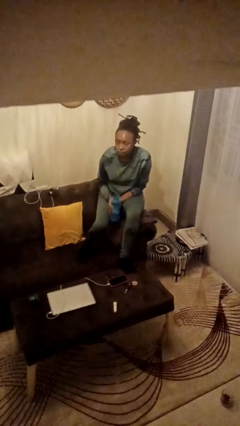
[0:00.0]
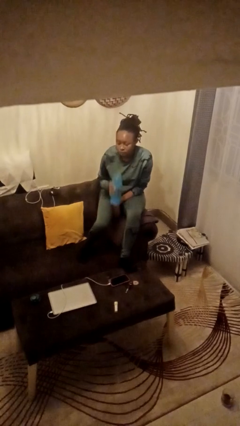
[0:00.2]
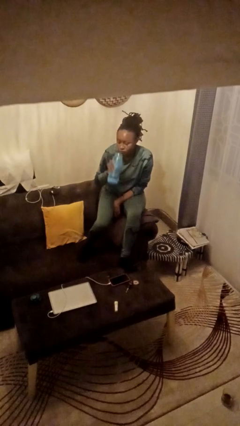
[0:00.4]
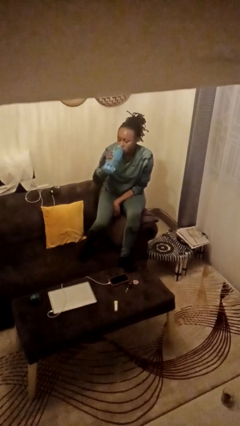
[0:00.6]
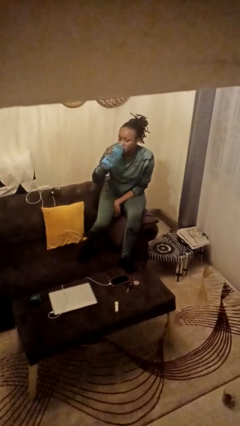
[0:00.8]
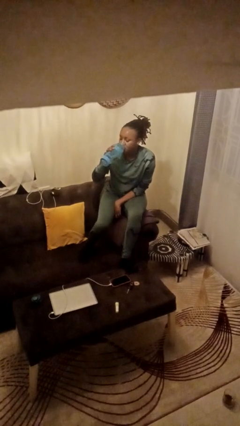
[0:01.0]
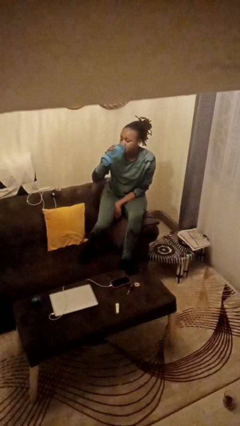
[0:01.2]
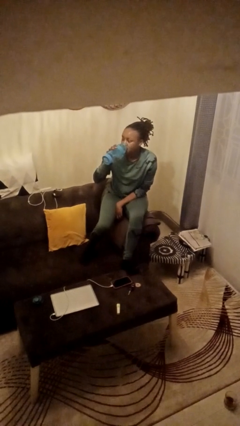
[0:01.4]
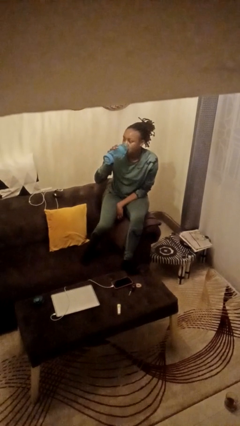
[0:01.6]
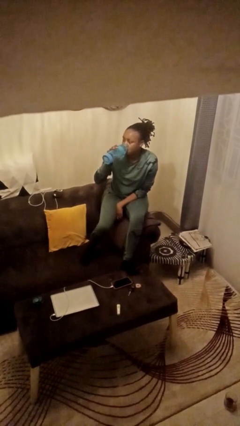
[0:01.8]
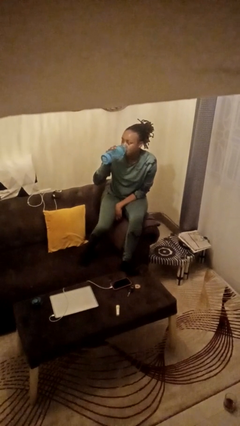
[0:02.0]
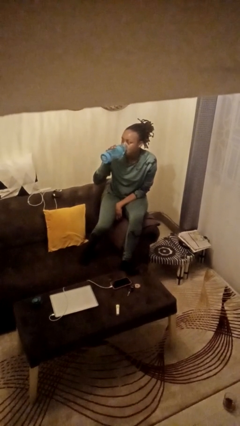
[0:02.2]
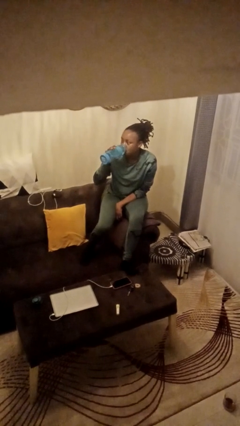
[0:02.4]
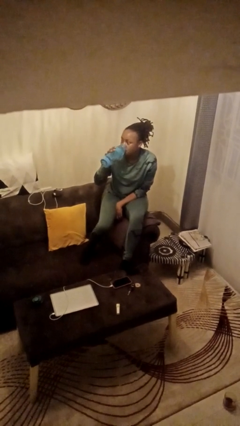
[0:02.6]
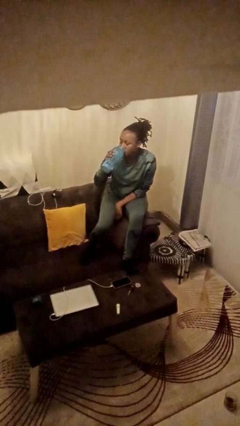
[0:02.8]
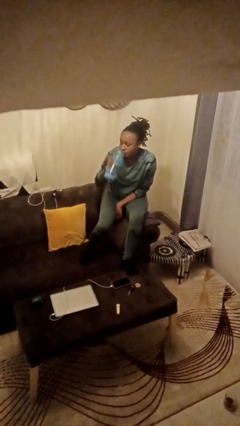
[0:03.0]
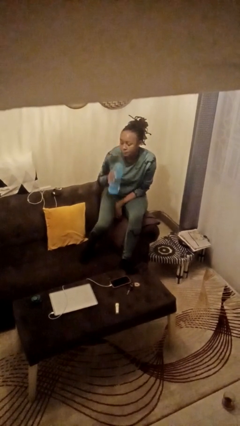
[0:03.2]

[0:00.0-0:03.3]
person drinks from bottle

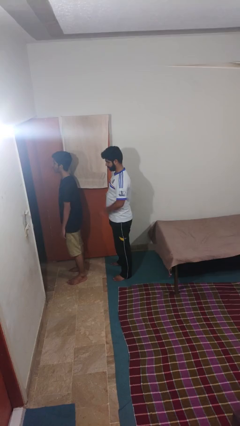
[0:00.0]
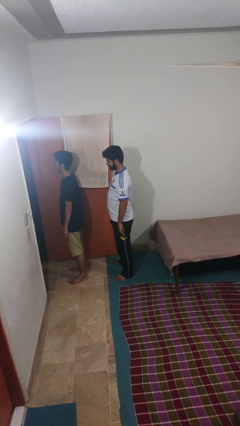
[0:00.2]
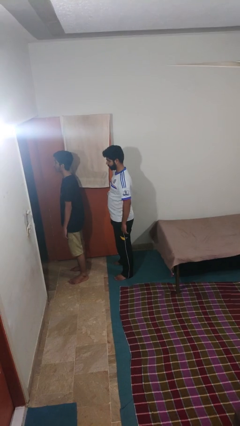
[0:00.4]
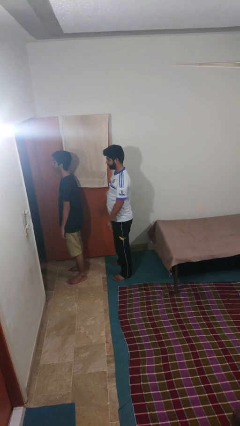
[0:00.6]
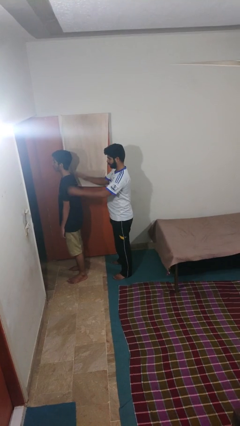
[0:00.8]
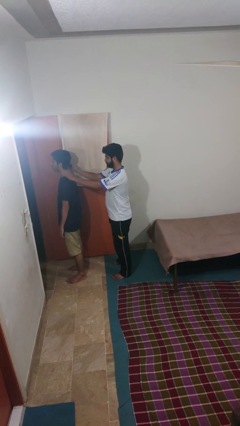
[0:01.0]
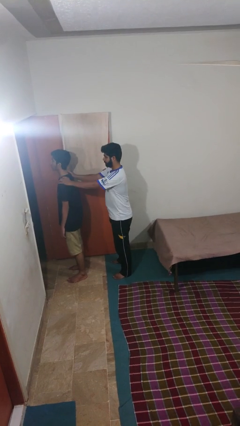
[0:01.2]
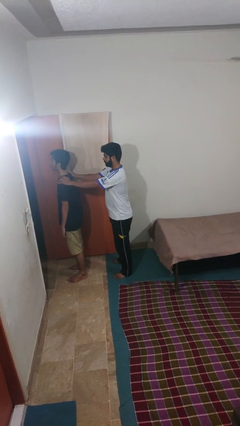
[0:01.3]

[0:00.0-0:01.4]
person grabs person by shoulder

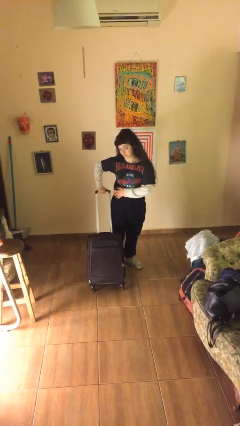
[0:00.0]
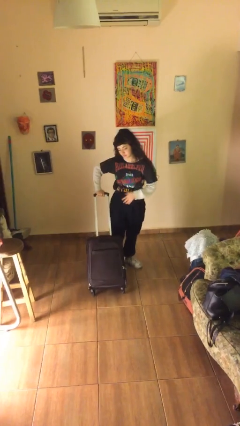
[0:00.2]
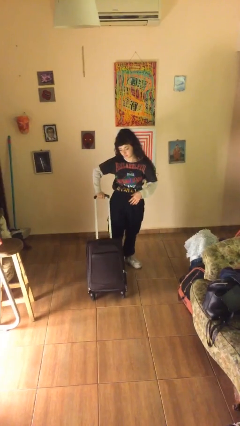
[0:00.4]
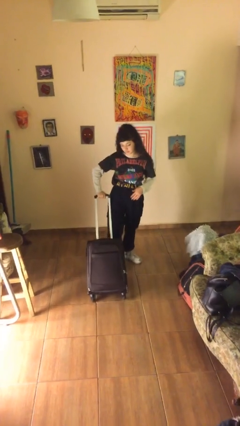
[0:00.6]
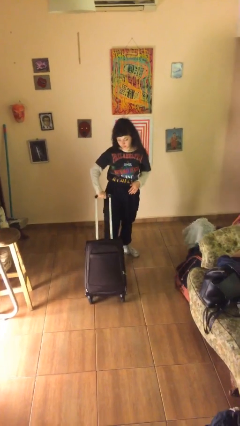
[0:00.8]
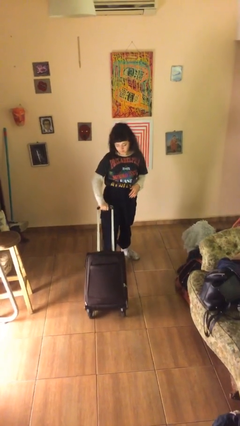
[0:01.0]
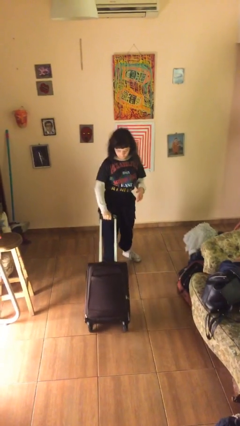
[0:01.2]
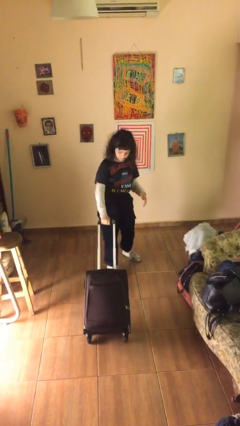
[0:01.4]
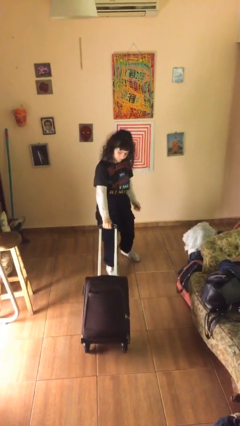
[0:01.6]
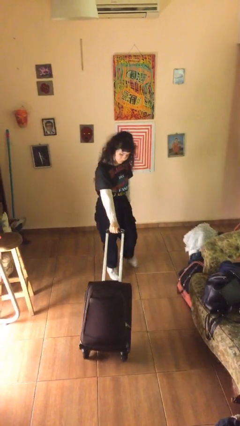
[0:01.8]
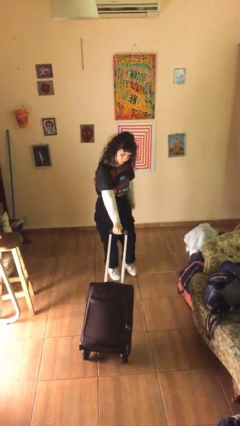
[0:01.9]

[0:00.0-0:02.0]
person pushes wheeled cart

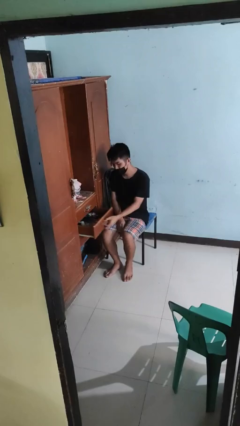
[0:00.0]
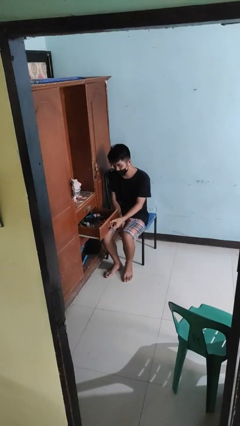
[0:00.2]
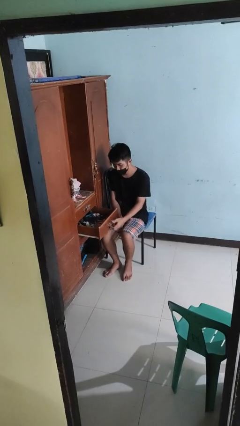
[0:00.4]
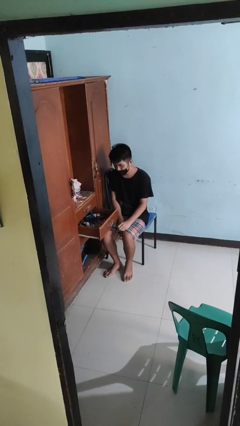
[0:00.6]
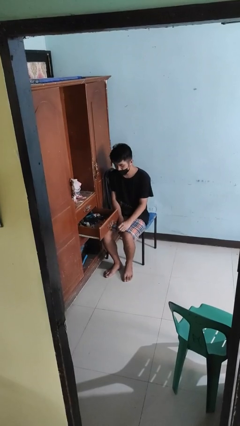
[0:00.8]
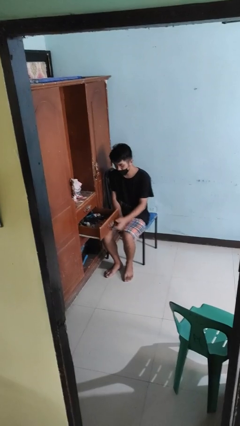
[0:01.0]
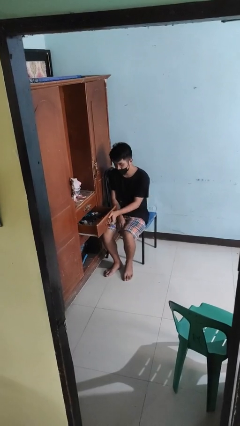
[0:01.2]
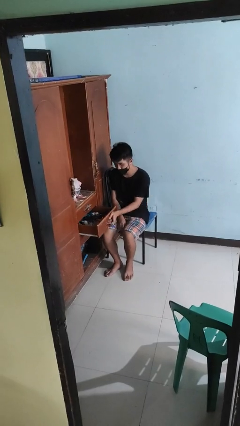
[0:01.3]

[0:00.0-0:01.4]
person opens dresser drawer

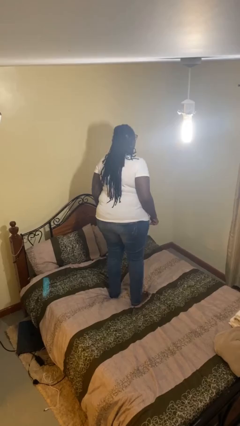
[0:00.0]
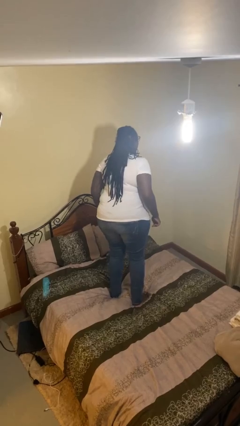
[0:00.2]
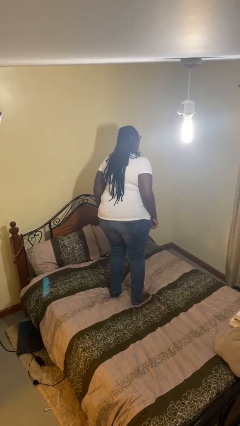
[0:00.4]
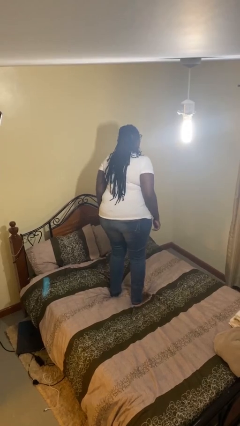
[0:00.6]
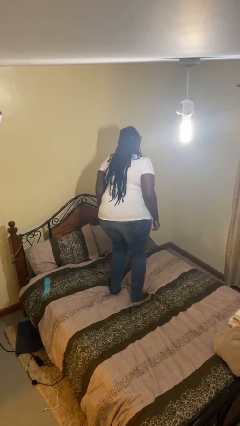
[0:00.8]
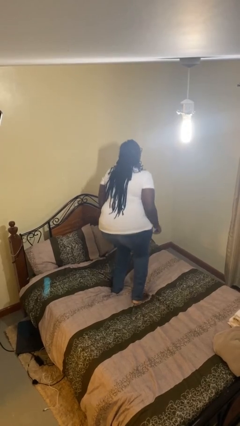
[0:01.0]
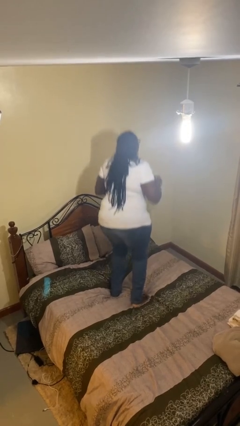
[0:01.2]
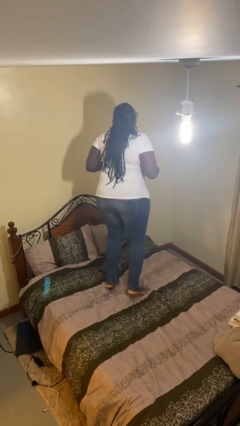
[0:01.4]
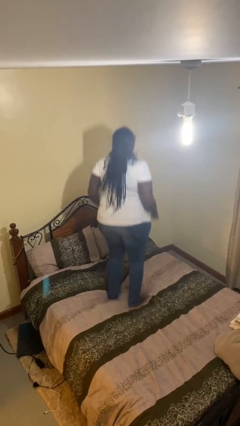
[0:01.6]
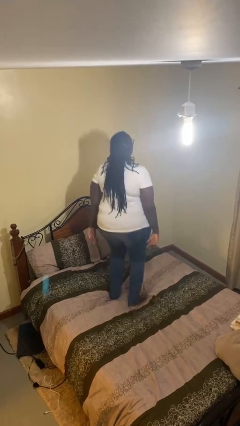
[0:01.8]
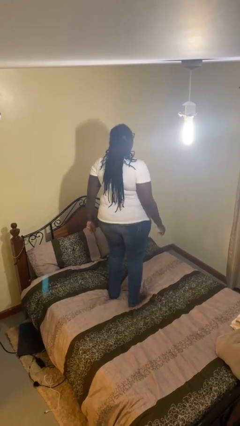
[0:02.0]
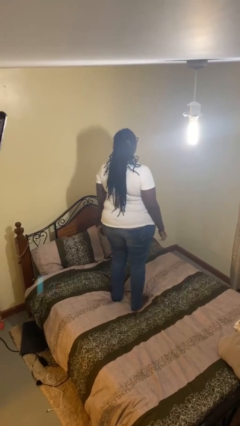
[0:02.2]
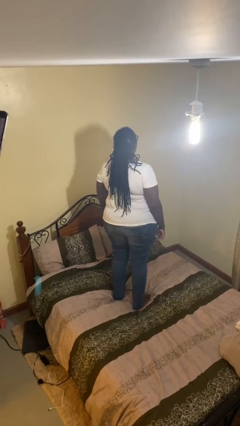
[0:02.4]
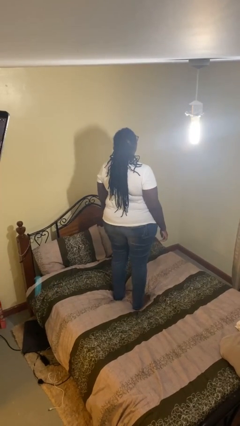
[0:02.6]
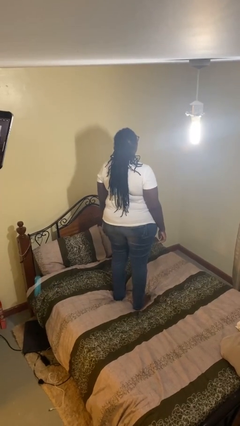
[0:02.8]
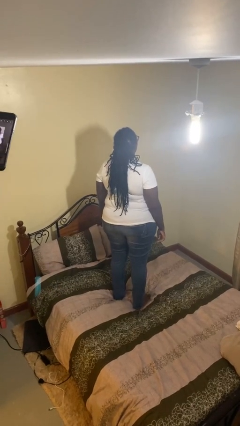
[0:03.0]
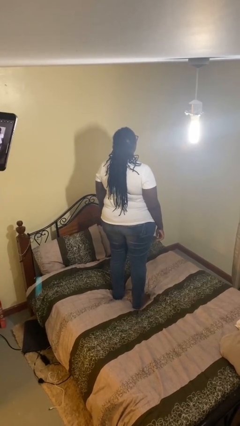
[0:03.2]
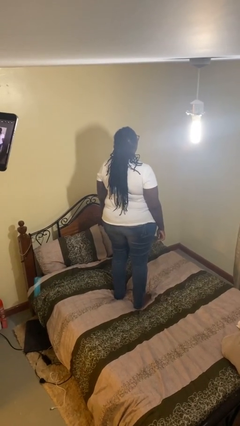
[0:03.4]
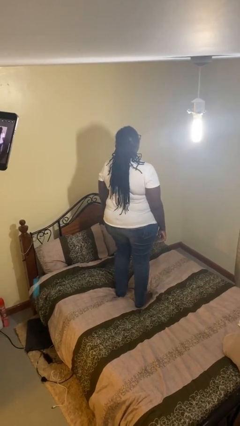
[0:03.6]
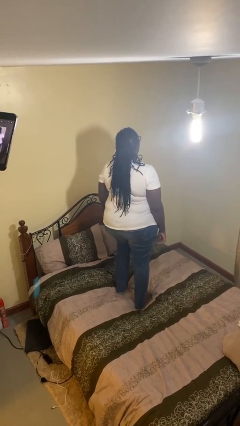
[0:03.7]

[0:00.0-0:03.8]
person jumps on bed

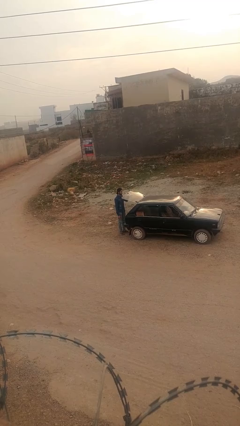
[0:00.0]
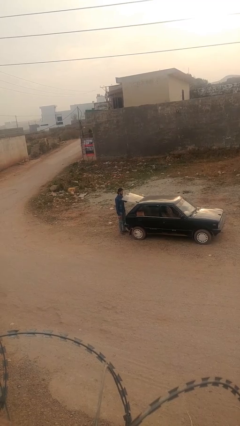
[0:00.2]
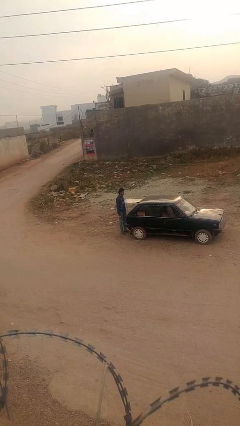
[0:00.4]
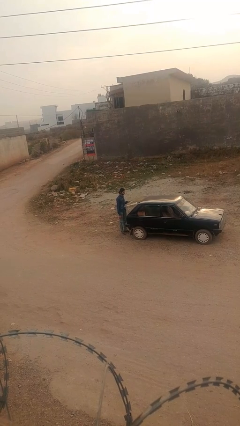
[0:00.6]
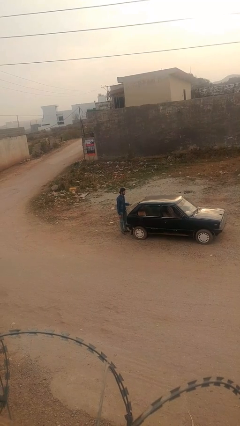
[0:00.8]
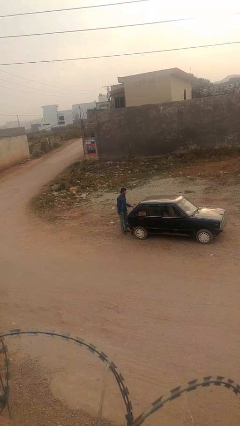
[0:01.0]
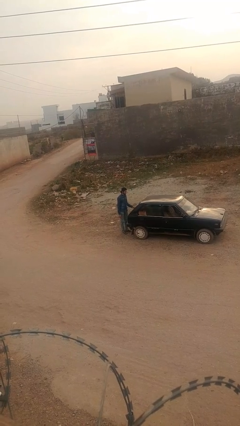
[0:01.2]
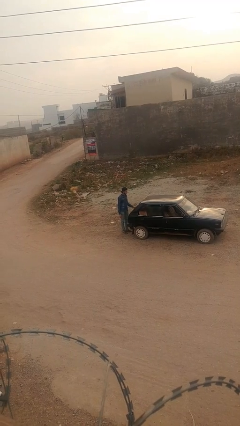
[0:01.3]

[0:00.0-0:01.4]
person closes car trunk

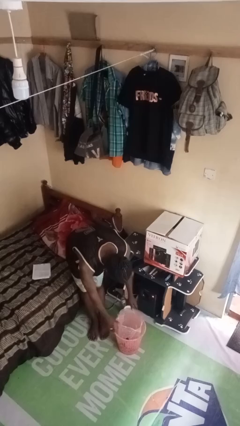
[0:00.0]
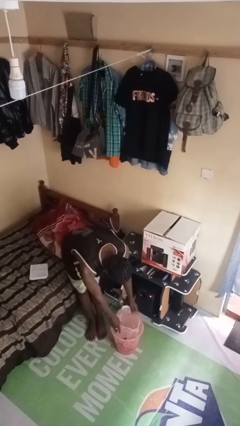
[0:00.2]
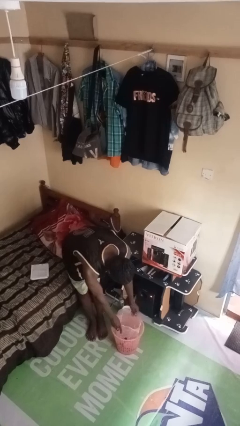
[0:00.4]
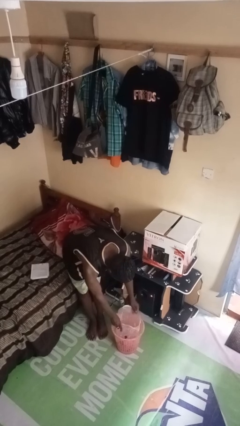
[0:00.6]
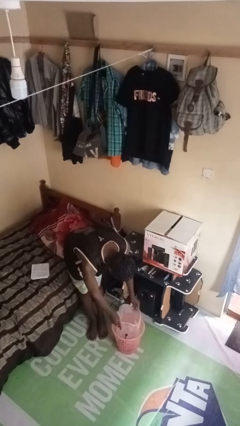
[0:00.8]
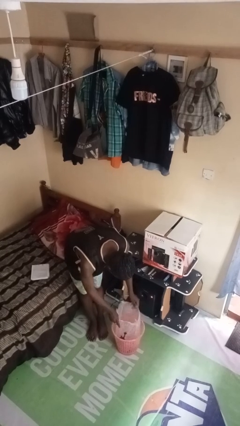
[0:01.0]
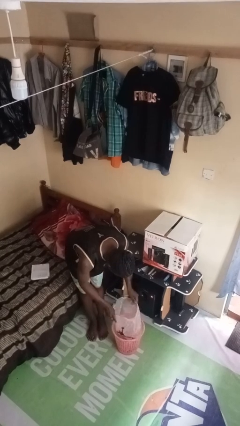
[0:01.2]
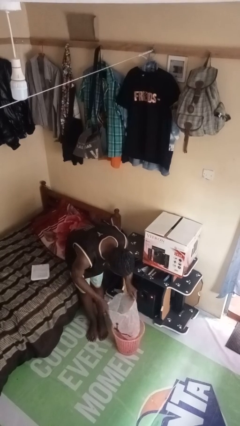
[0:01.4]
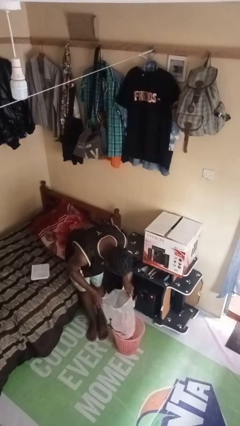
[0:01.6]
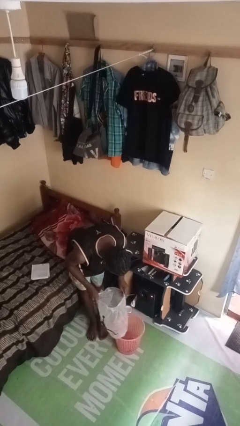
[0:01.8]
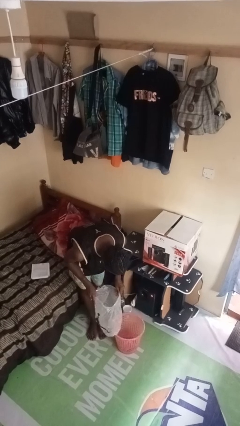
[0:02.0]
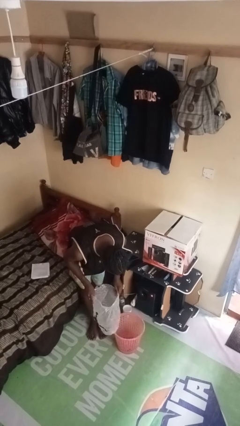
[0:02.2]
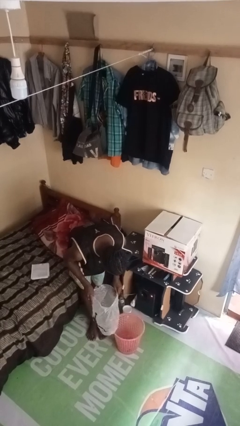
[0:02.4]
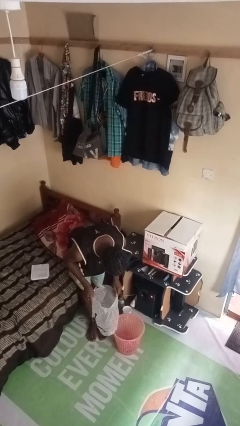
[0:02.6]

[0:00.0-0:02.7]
person removes trashbag from trashcan

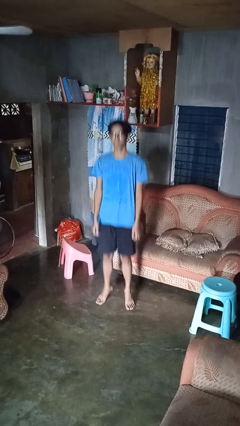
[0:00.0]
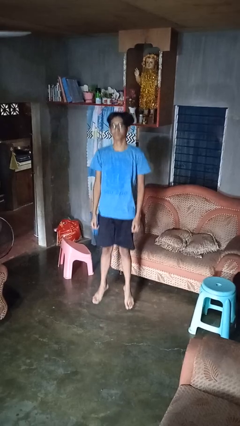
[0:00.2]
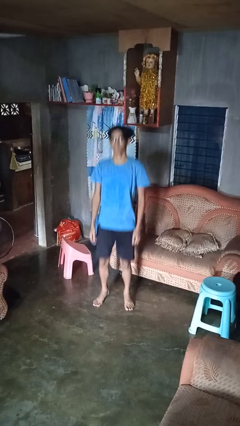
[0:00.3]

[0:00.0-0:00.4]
person jumps
